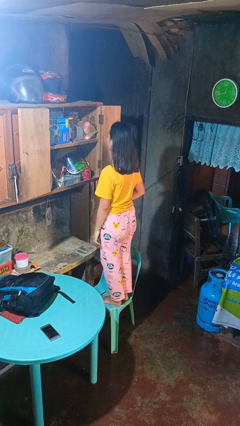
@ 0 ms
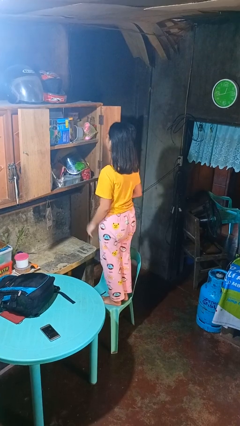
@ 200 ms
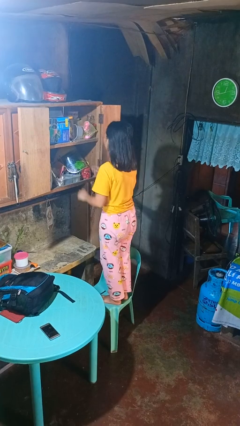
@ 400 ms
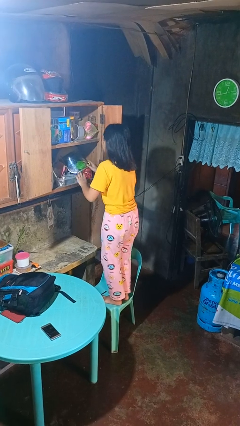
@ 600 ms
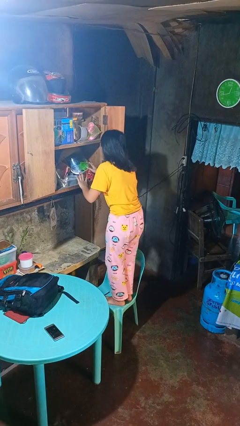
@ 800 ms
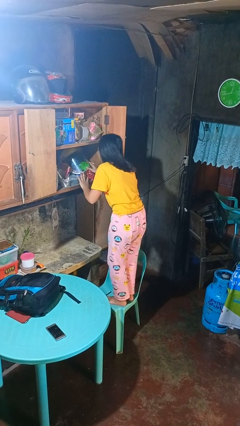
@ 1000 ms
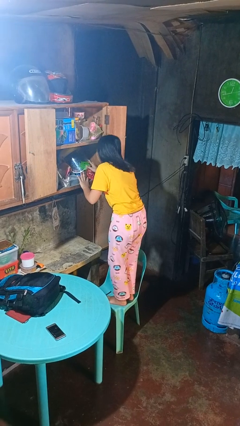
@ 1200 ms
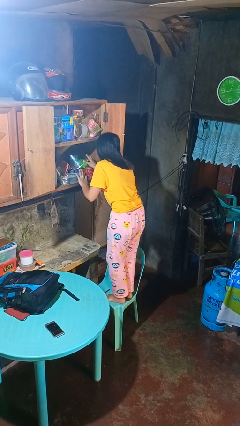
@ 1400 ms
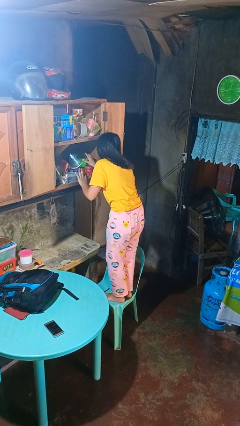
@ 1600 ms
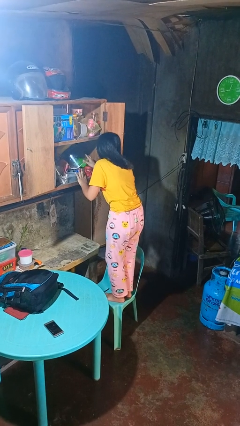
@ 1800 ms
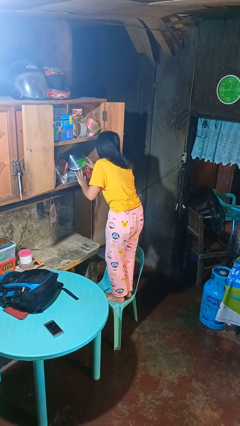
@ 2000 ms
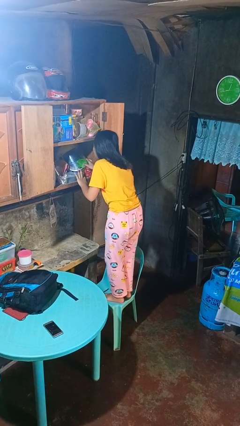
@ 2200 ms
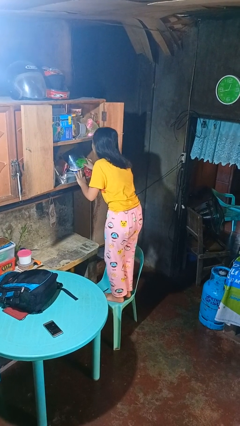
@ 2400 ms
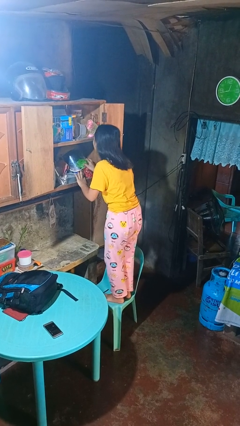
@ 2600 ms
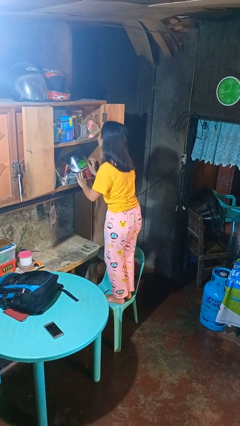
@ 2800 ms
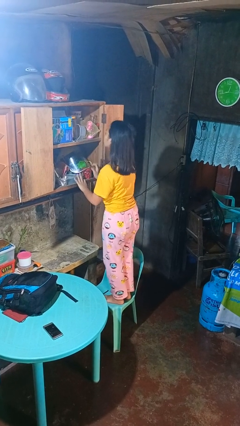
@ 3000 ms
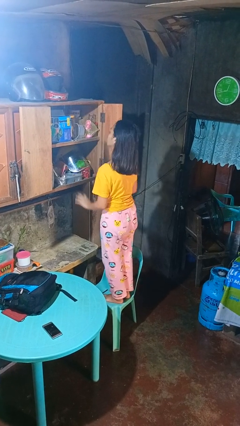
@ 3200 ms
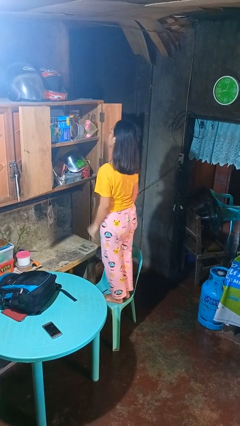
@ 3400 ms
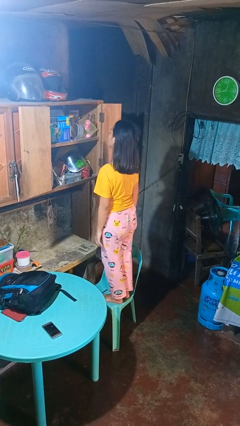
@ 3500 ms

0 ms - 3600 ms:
person searches in cabinet

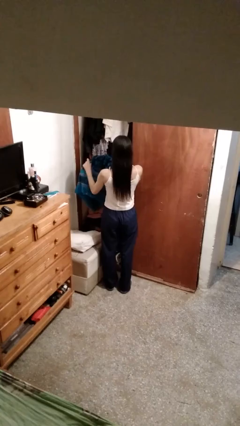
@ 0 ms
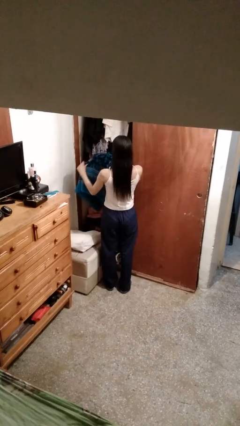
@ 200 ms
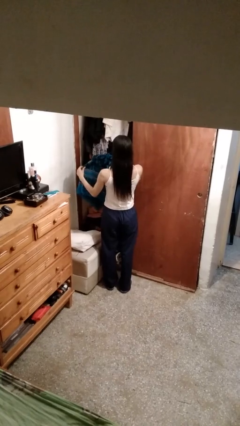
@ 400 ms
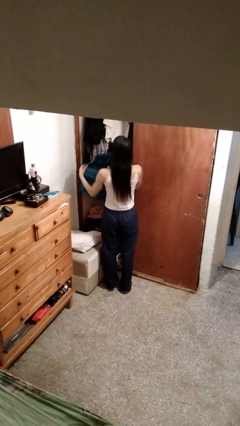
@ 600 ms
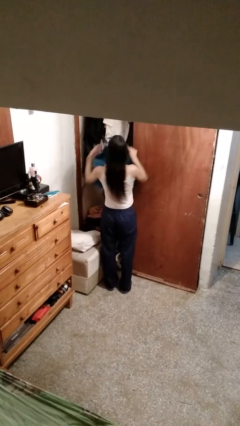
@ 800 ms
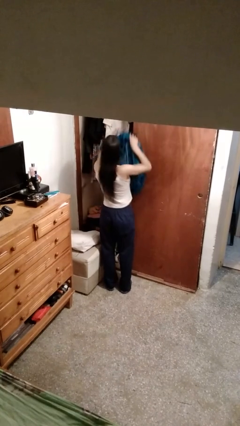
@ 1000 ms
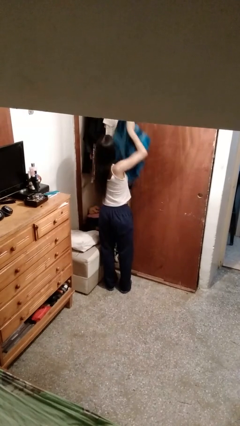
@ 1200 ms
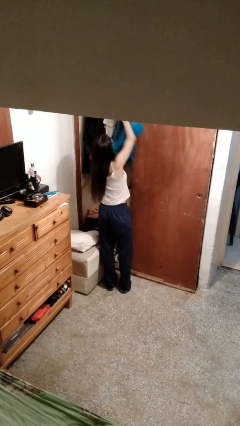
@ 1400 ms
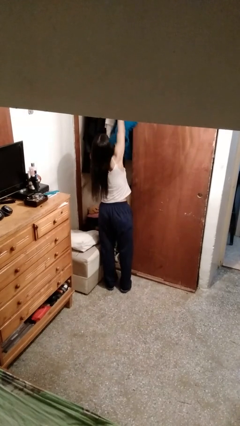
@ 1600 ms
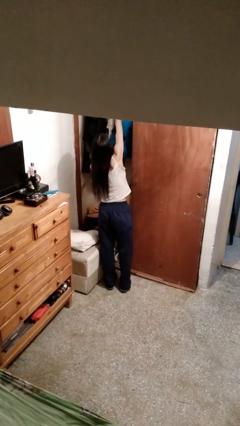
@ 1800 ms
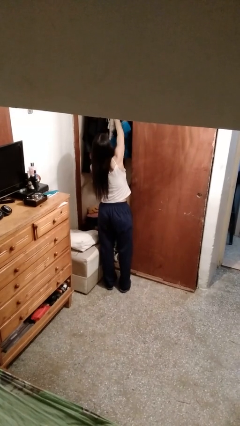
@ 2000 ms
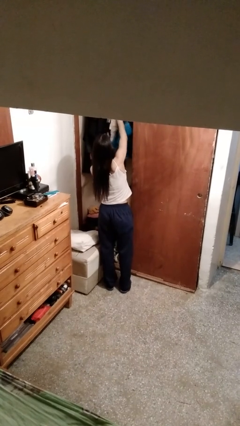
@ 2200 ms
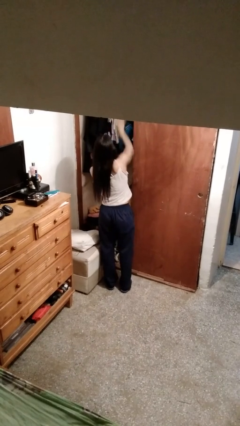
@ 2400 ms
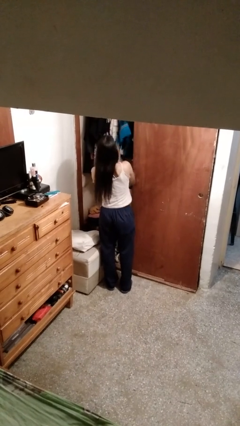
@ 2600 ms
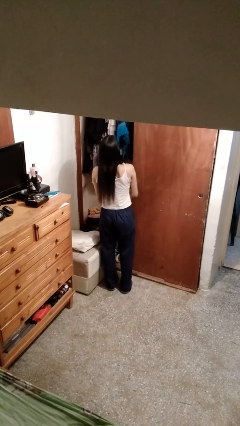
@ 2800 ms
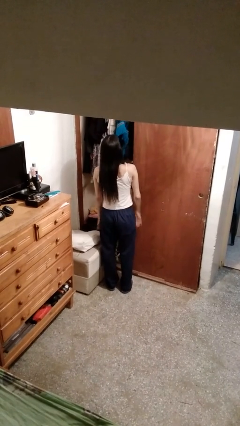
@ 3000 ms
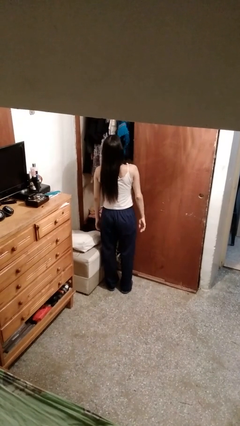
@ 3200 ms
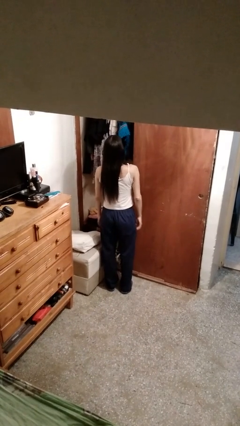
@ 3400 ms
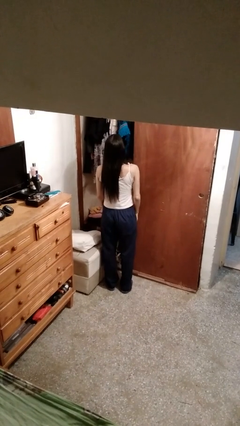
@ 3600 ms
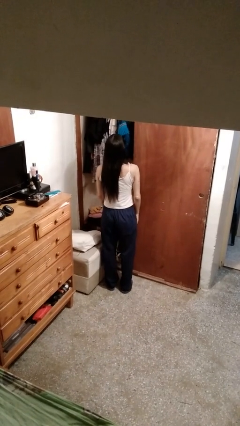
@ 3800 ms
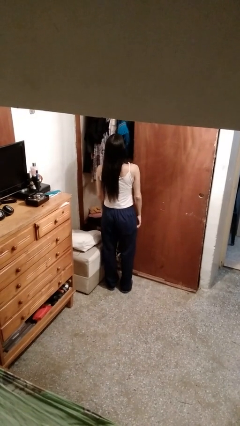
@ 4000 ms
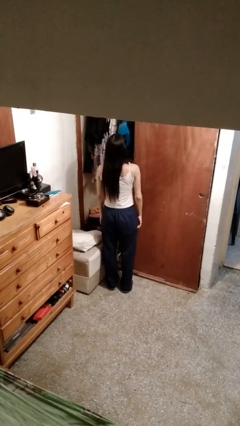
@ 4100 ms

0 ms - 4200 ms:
person puts clothes into closet

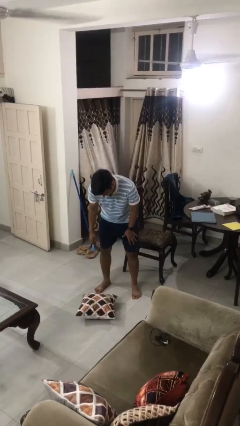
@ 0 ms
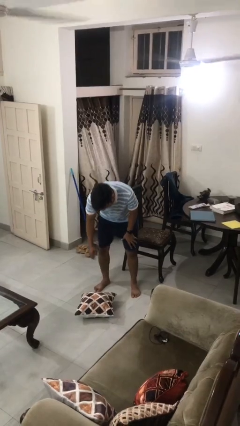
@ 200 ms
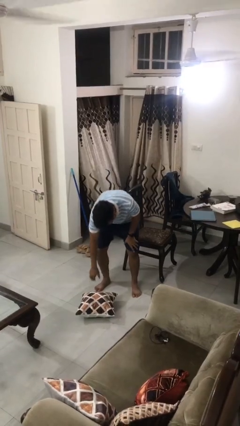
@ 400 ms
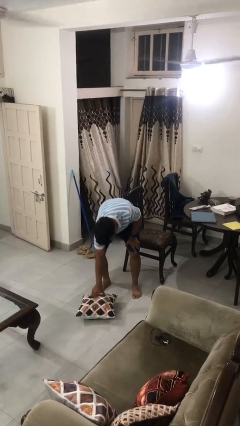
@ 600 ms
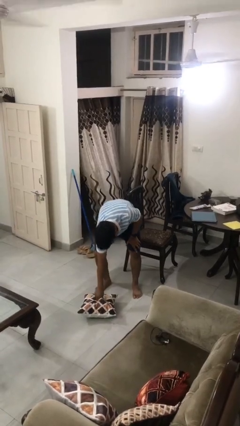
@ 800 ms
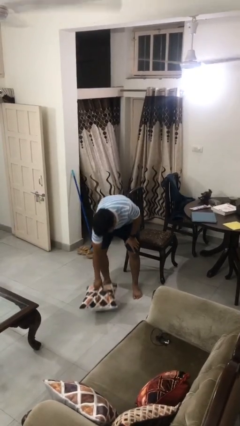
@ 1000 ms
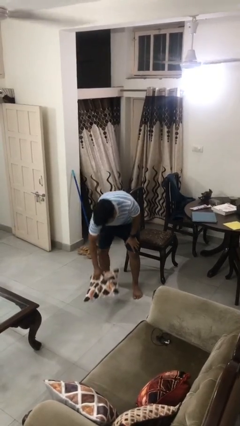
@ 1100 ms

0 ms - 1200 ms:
person picks up object from floor

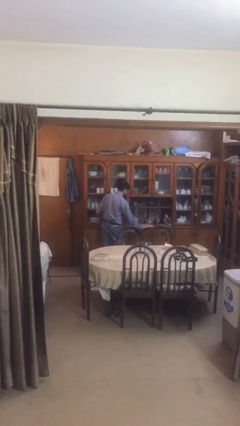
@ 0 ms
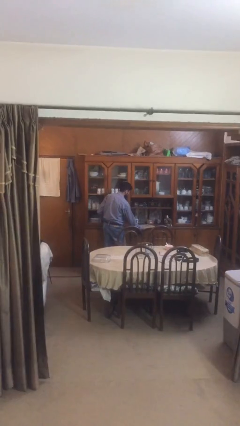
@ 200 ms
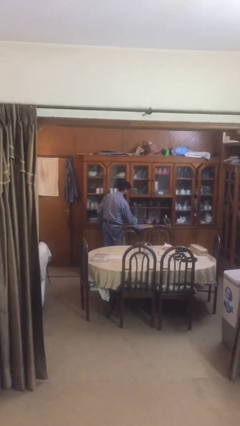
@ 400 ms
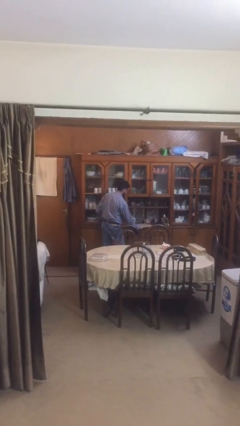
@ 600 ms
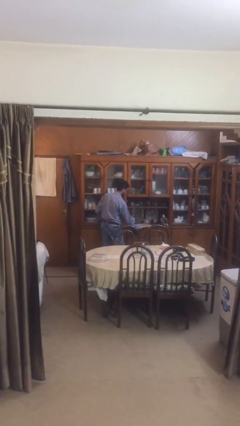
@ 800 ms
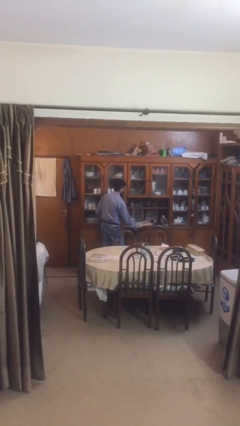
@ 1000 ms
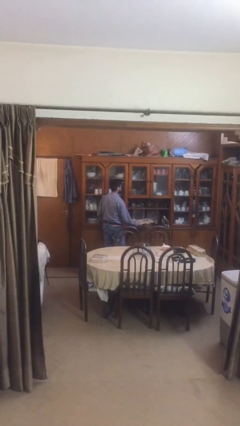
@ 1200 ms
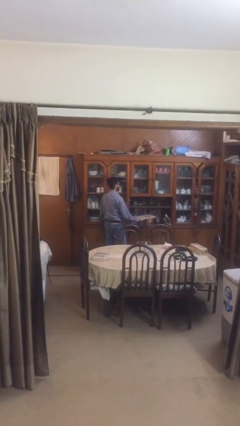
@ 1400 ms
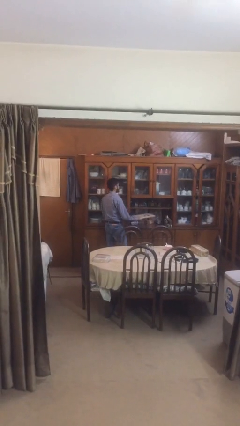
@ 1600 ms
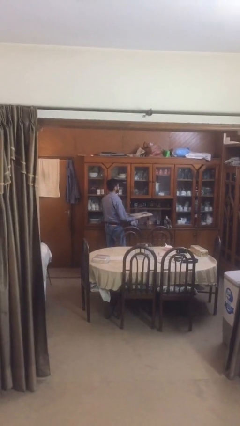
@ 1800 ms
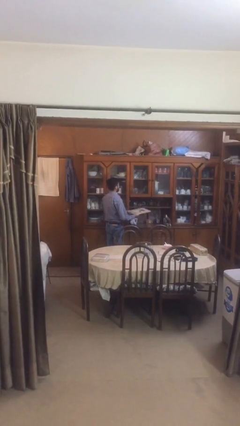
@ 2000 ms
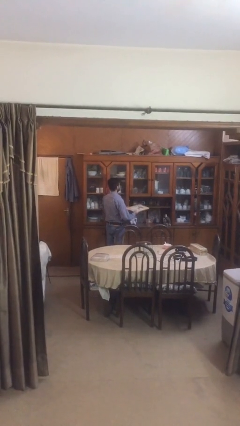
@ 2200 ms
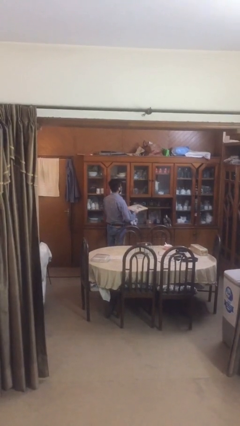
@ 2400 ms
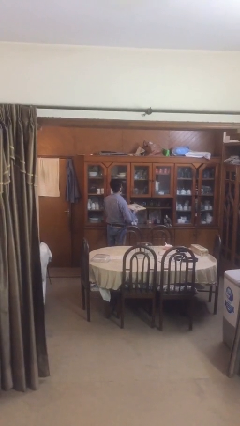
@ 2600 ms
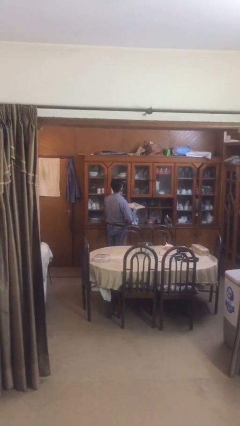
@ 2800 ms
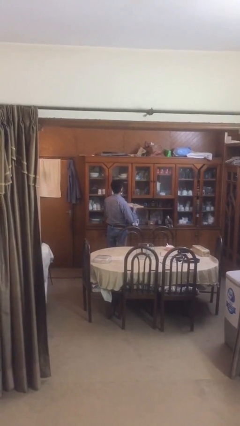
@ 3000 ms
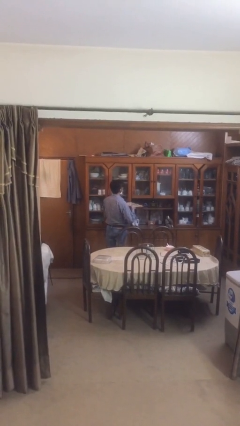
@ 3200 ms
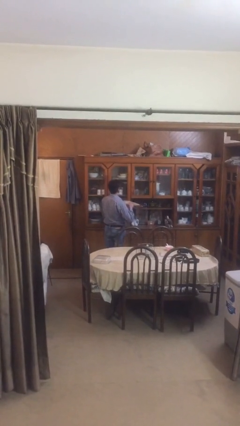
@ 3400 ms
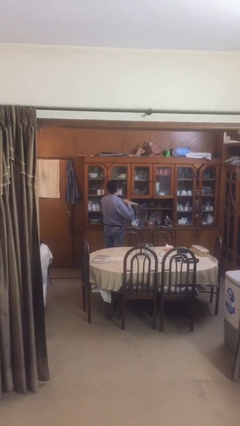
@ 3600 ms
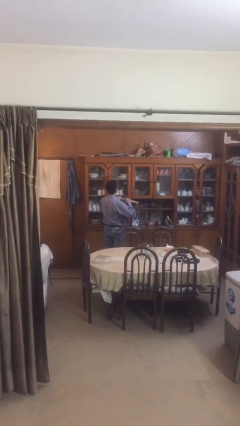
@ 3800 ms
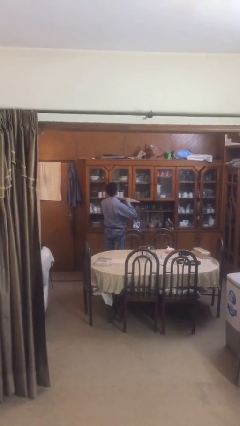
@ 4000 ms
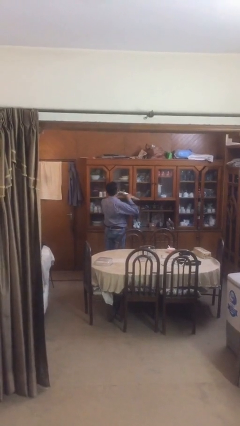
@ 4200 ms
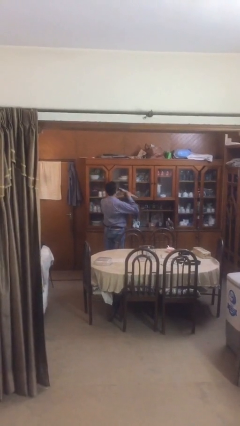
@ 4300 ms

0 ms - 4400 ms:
person picks up object from table

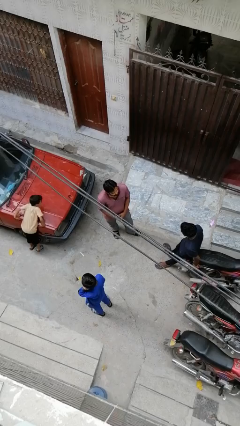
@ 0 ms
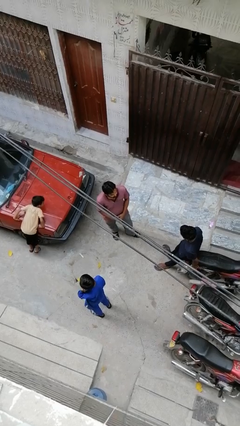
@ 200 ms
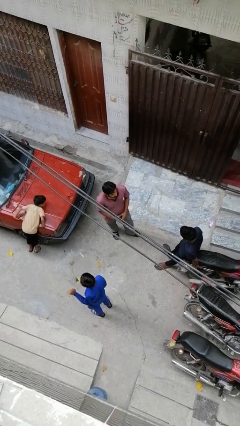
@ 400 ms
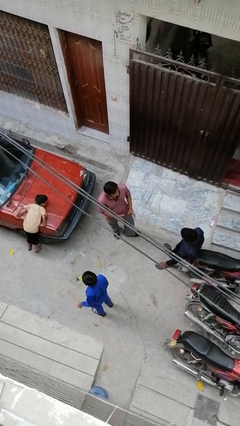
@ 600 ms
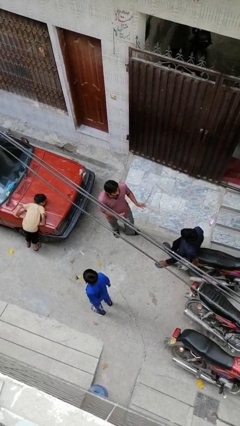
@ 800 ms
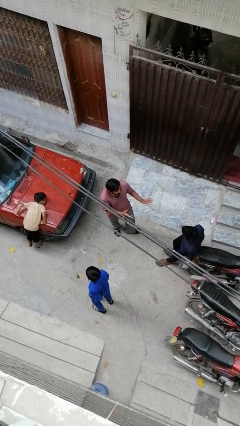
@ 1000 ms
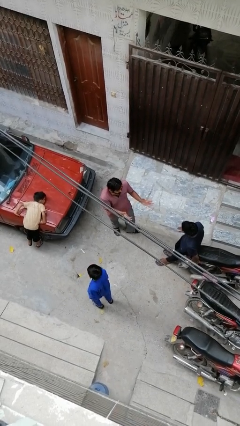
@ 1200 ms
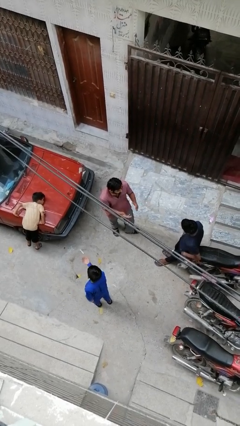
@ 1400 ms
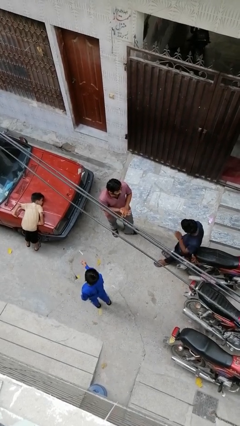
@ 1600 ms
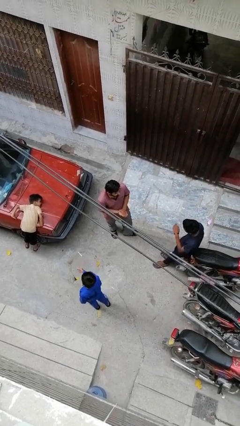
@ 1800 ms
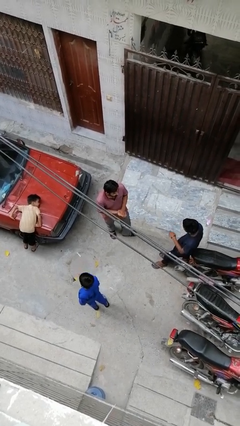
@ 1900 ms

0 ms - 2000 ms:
person talks to person

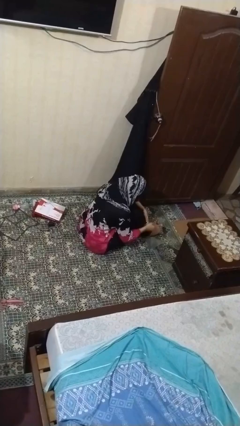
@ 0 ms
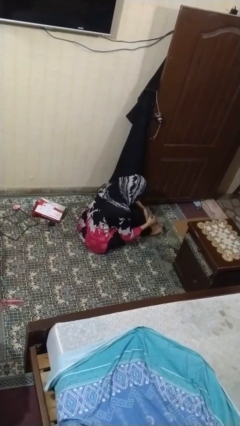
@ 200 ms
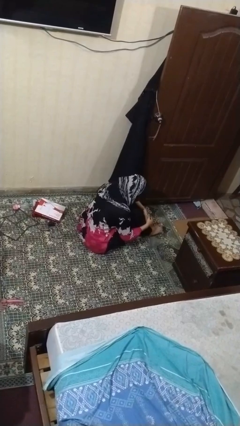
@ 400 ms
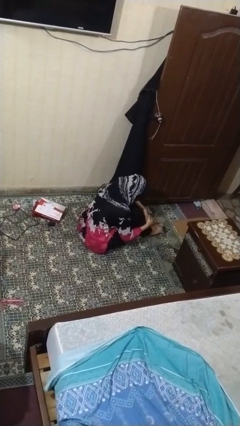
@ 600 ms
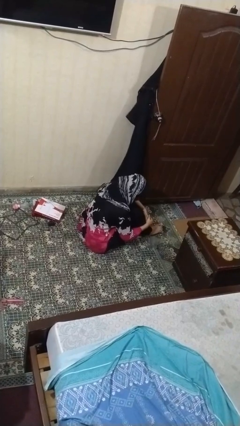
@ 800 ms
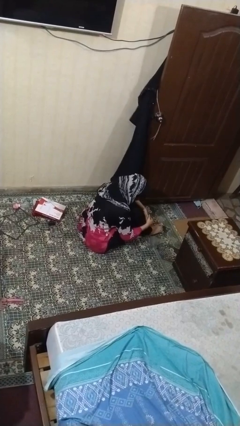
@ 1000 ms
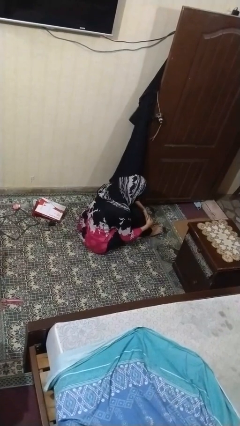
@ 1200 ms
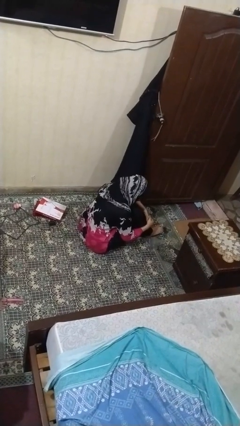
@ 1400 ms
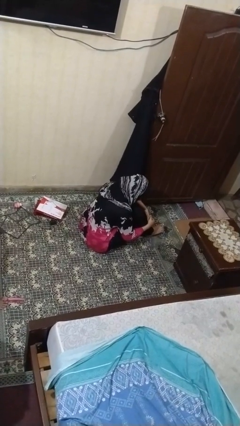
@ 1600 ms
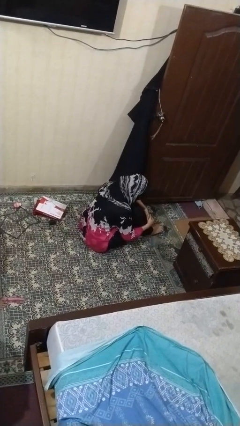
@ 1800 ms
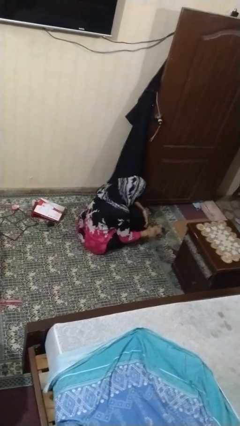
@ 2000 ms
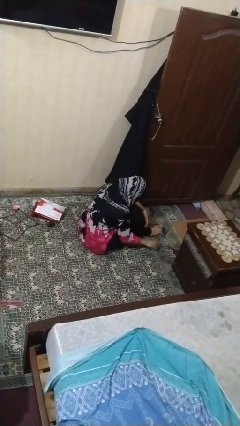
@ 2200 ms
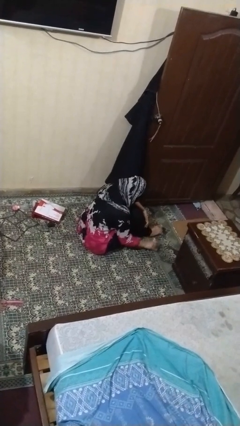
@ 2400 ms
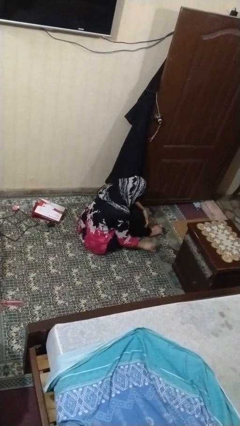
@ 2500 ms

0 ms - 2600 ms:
person spills on floor
